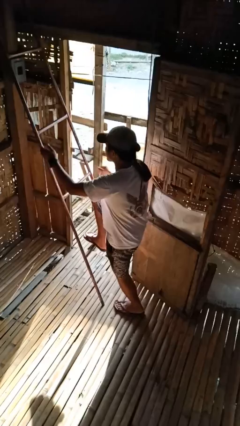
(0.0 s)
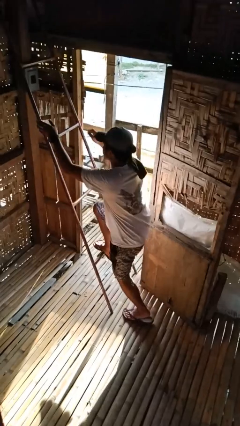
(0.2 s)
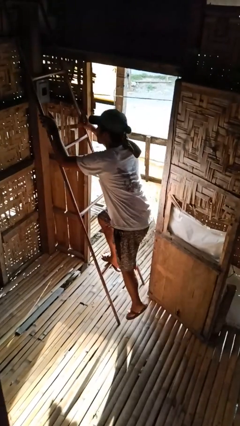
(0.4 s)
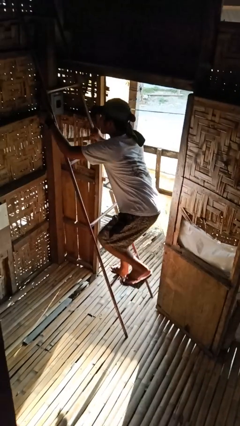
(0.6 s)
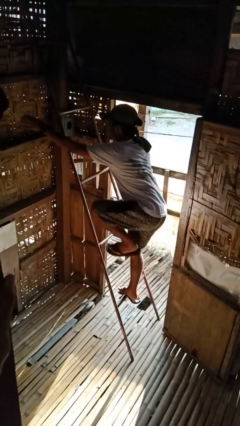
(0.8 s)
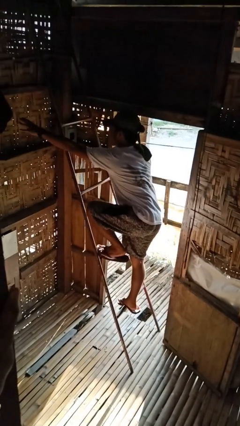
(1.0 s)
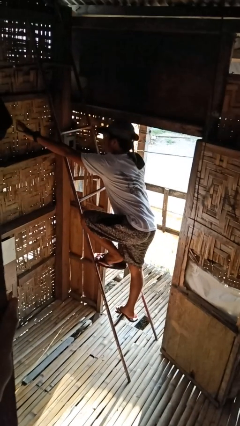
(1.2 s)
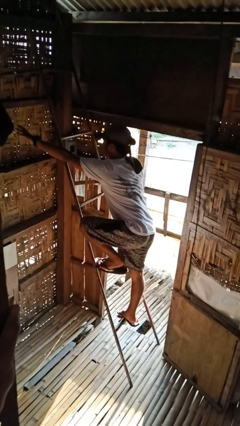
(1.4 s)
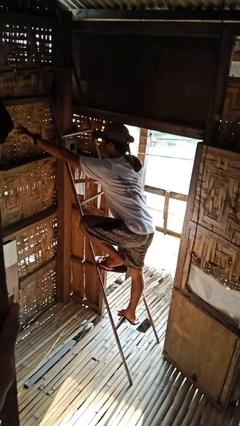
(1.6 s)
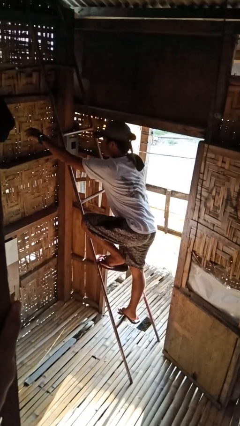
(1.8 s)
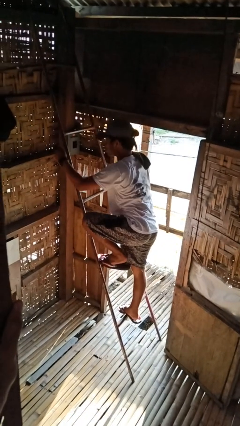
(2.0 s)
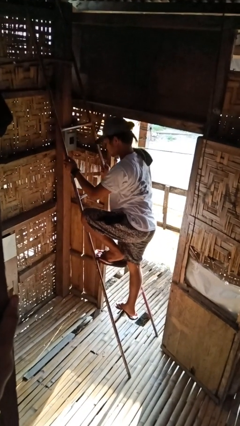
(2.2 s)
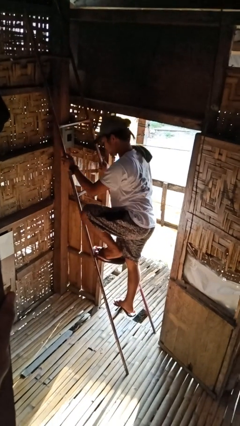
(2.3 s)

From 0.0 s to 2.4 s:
person climbs up ladder

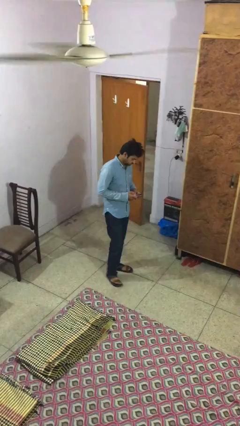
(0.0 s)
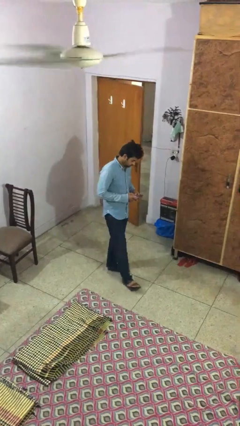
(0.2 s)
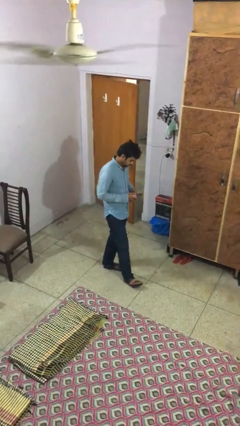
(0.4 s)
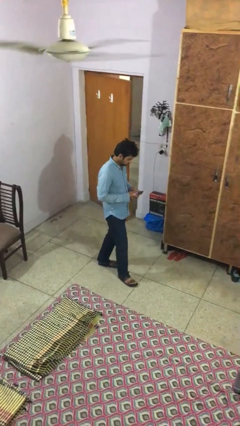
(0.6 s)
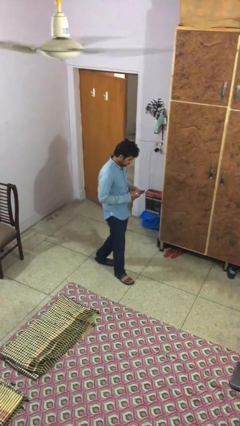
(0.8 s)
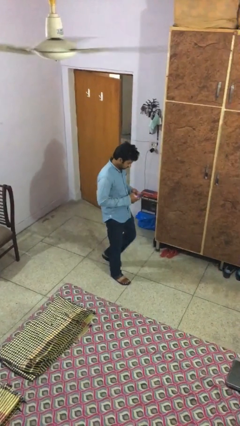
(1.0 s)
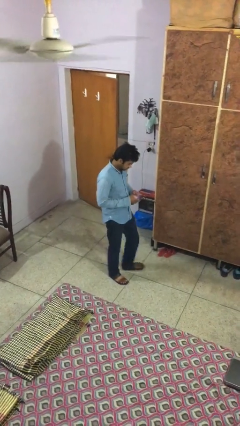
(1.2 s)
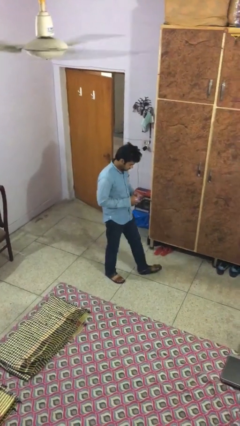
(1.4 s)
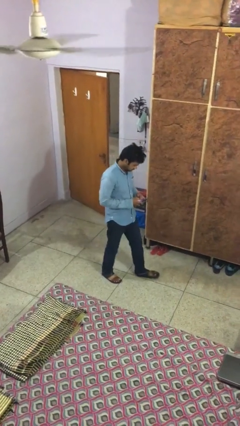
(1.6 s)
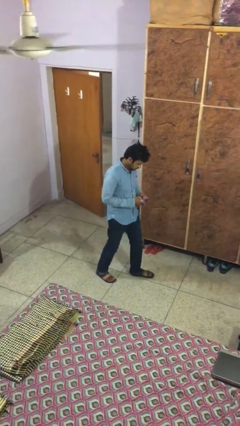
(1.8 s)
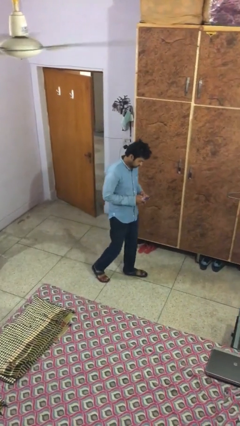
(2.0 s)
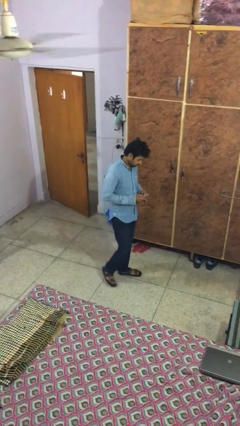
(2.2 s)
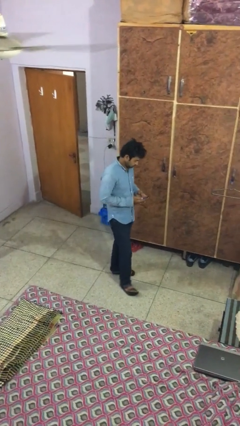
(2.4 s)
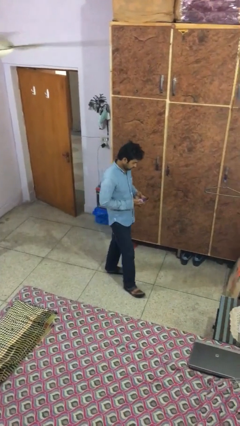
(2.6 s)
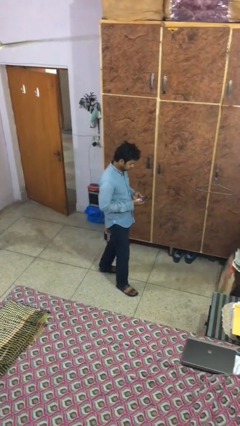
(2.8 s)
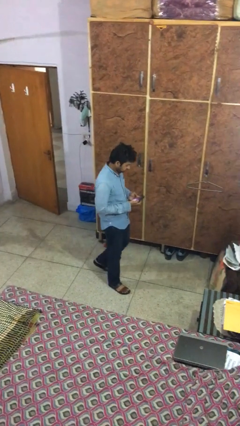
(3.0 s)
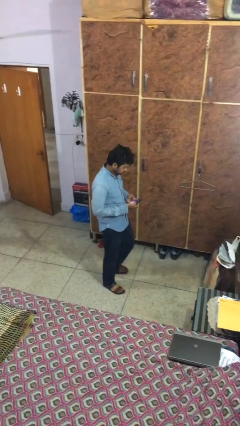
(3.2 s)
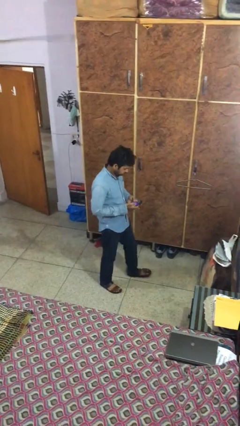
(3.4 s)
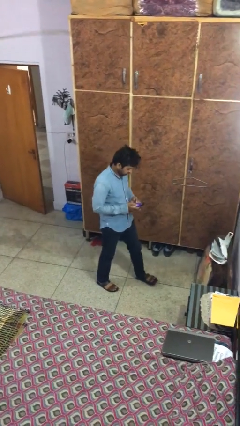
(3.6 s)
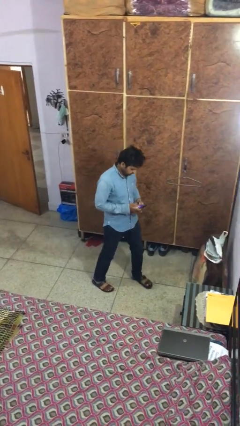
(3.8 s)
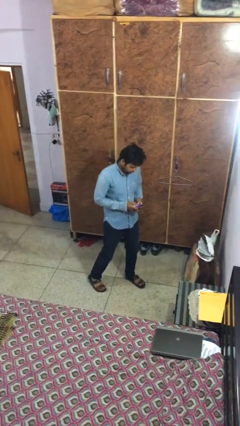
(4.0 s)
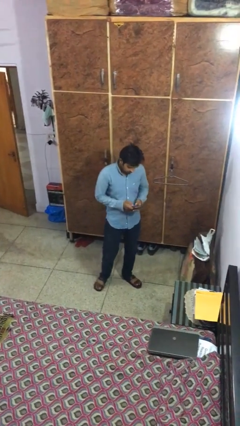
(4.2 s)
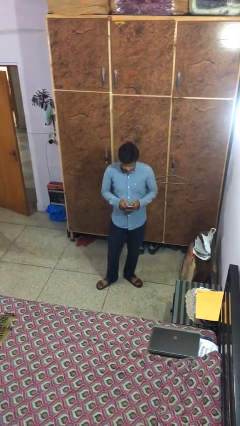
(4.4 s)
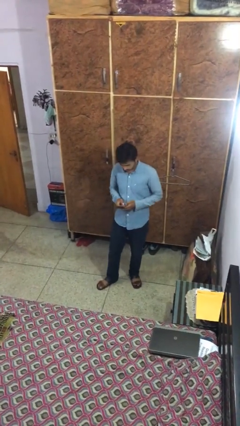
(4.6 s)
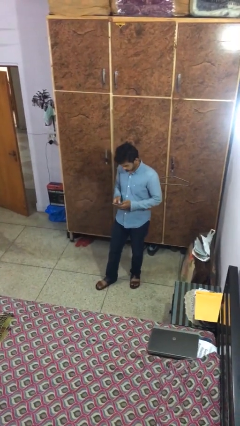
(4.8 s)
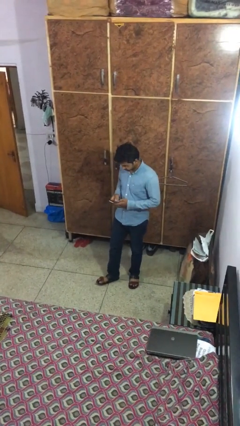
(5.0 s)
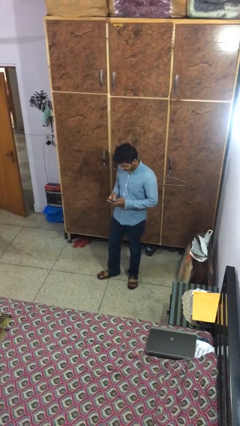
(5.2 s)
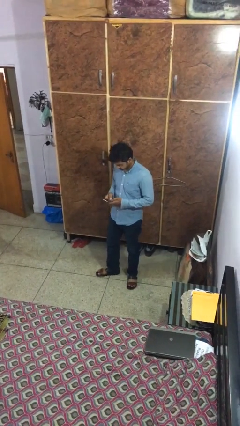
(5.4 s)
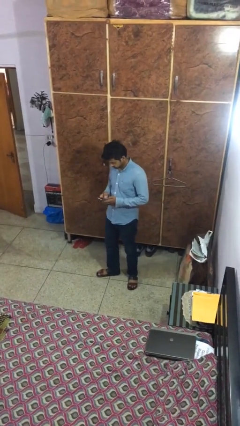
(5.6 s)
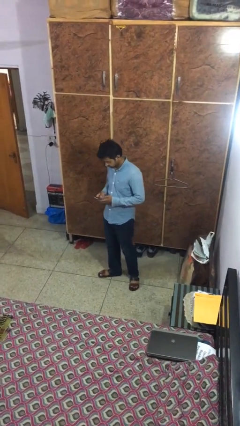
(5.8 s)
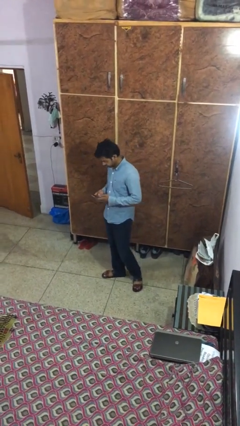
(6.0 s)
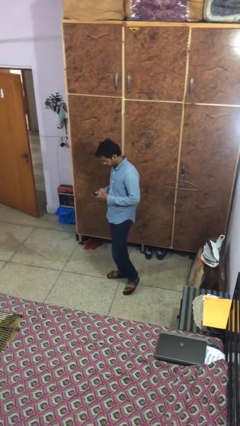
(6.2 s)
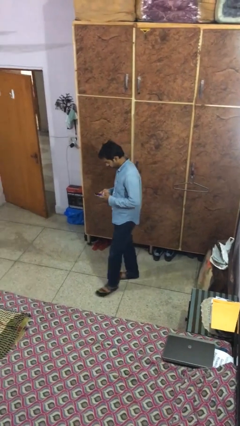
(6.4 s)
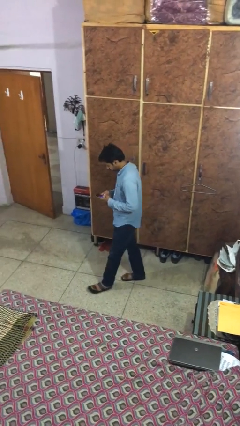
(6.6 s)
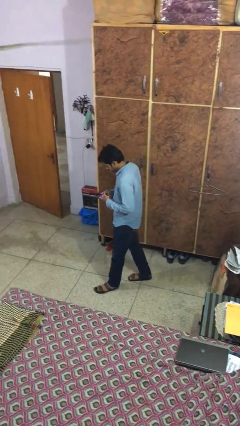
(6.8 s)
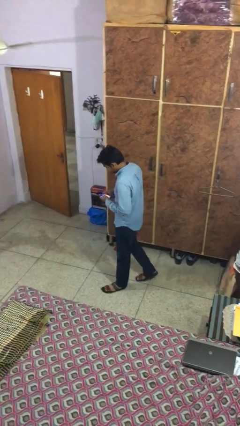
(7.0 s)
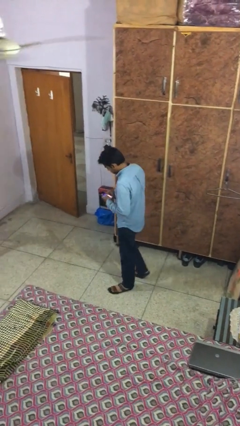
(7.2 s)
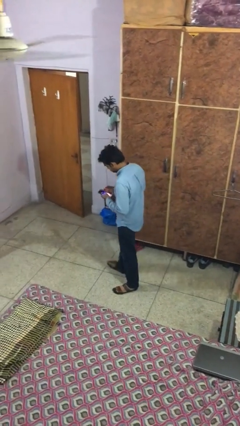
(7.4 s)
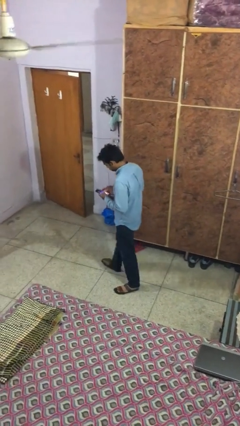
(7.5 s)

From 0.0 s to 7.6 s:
person texts on phone

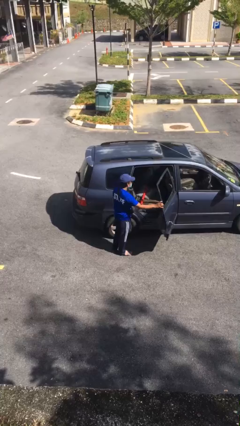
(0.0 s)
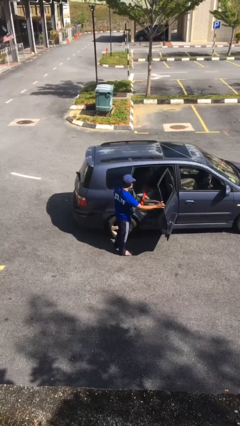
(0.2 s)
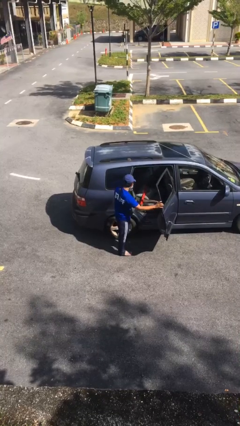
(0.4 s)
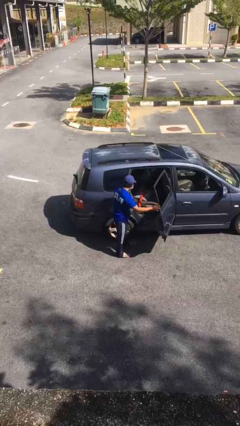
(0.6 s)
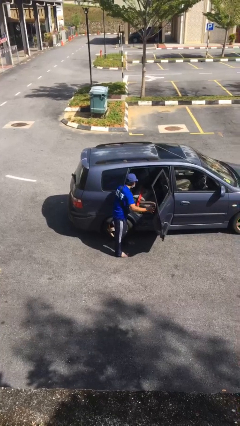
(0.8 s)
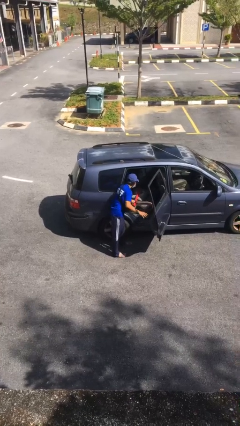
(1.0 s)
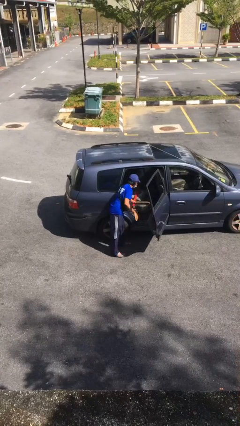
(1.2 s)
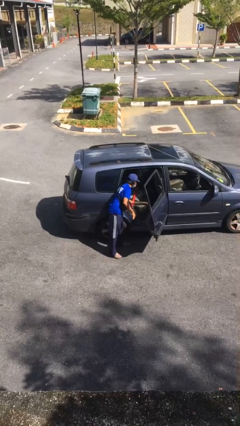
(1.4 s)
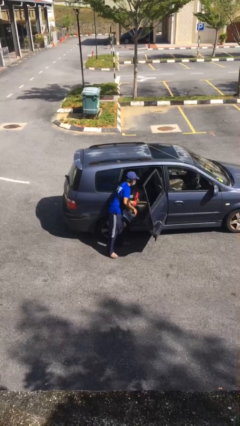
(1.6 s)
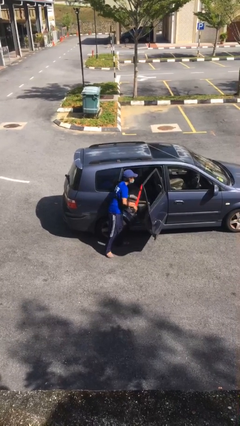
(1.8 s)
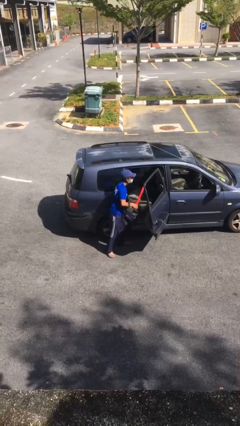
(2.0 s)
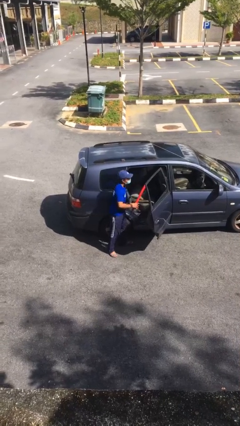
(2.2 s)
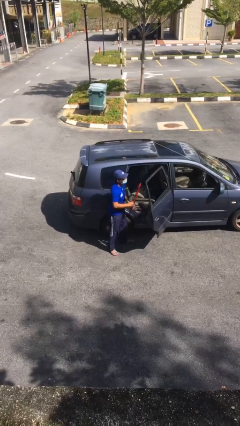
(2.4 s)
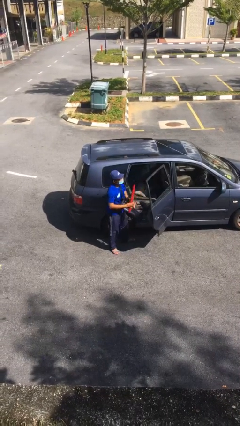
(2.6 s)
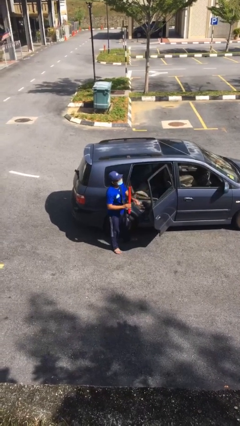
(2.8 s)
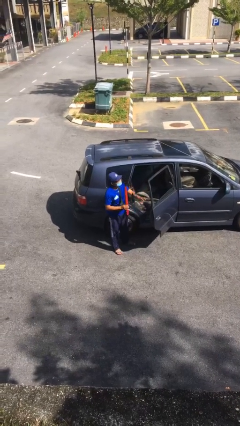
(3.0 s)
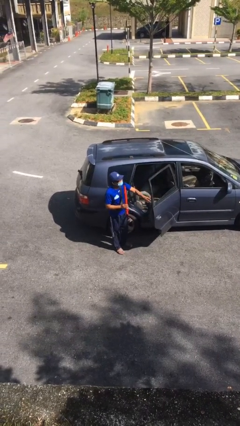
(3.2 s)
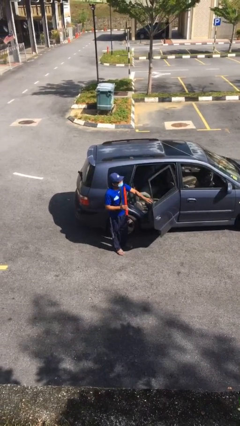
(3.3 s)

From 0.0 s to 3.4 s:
person unloads car

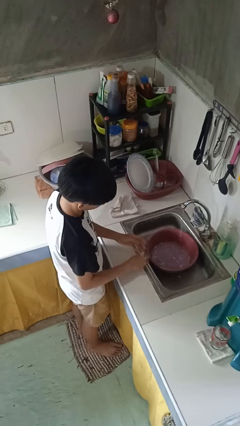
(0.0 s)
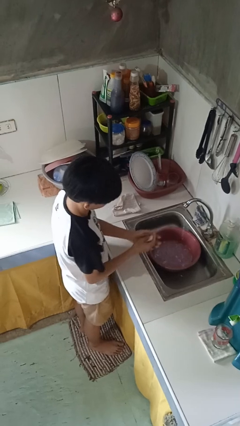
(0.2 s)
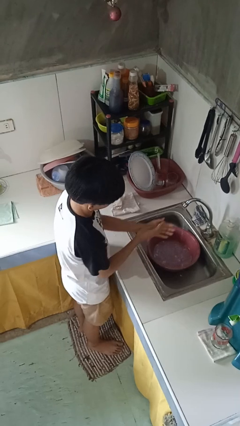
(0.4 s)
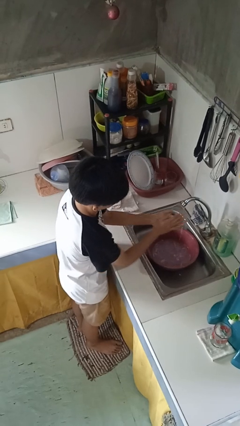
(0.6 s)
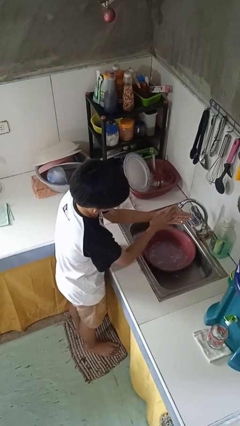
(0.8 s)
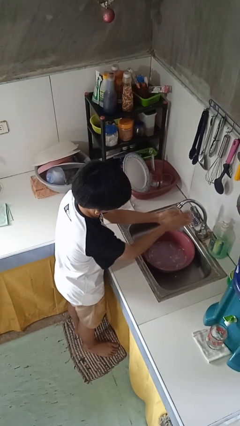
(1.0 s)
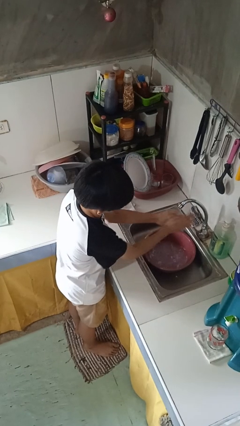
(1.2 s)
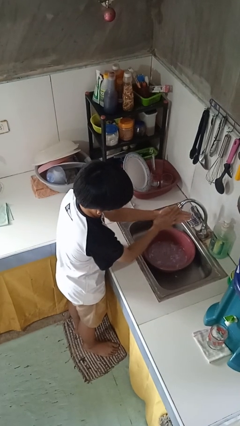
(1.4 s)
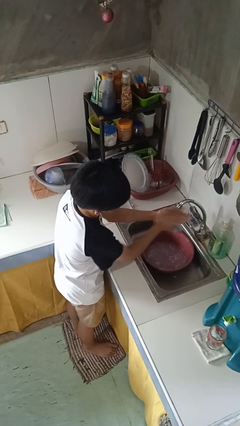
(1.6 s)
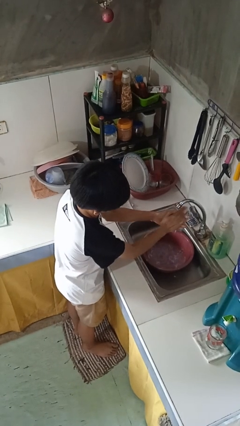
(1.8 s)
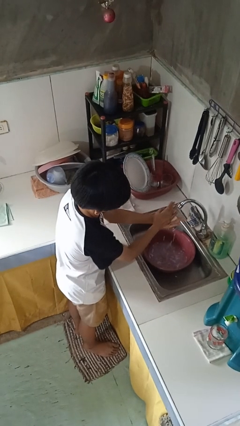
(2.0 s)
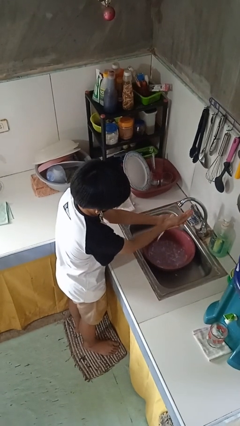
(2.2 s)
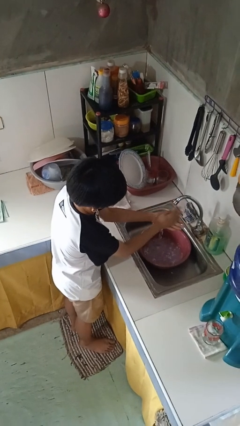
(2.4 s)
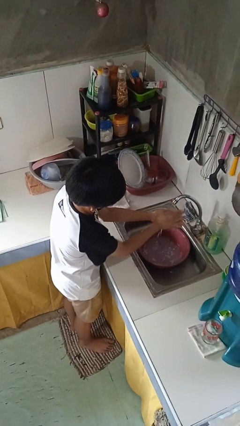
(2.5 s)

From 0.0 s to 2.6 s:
person washes hands

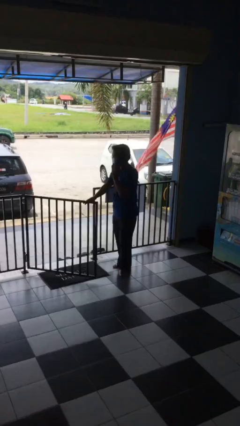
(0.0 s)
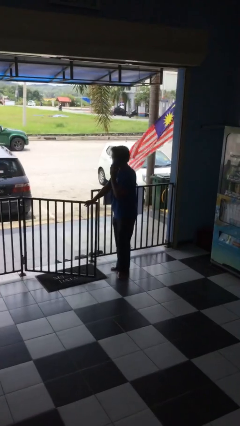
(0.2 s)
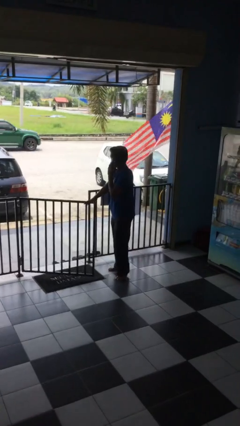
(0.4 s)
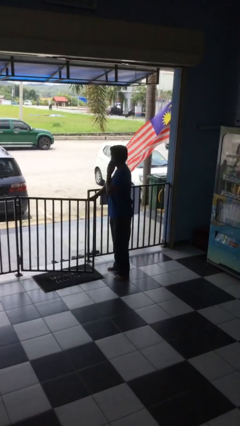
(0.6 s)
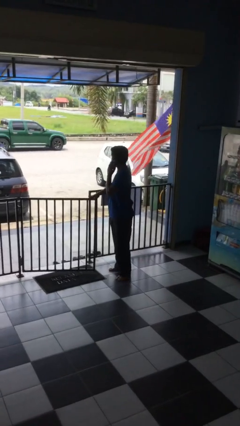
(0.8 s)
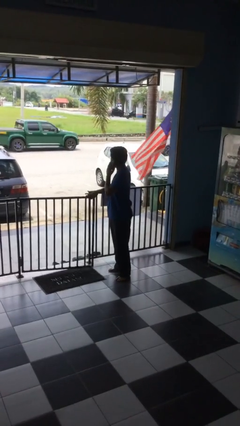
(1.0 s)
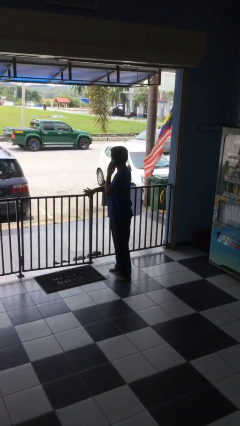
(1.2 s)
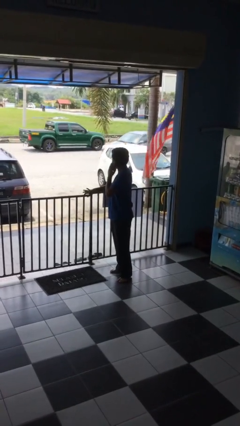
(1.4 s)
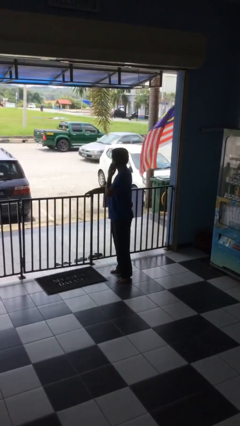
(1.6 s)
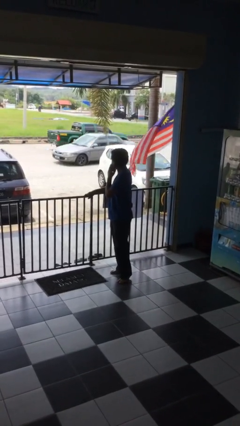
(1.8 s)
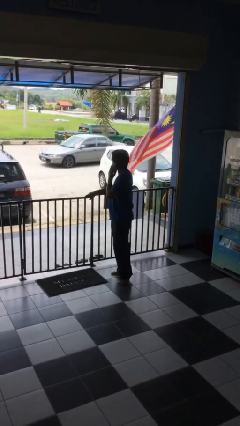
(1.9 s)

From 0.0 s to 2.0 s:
person closes facility door
